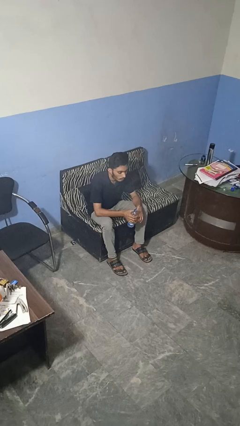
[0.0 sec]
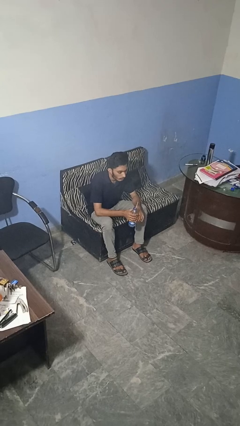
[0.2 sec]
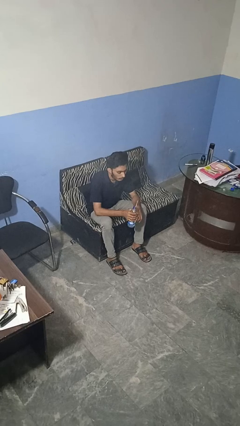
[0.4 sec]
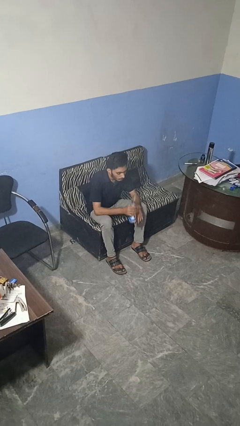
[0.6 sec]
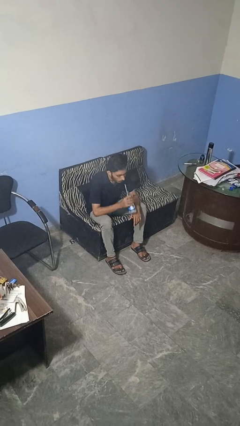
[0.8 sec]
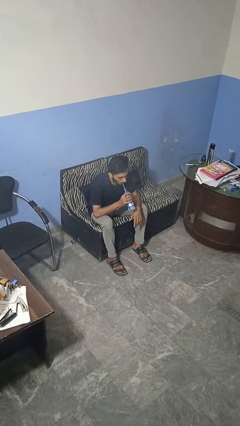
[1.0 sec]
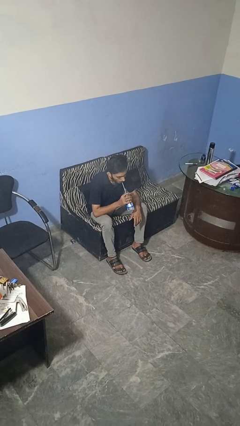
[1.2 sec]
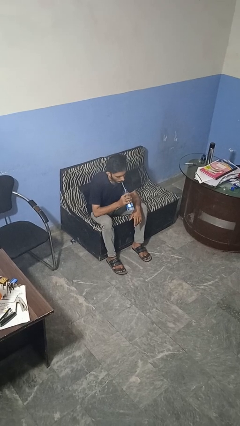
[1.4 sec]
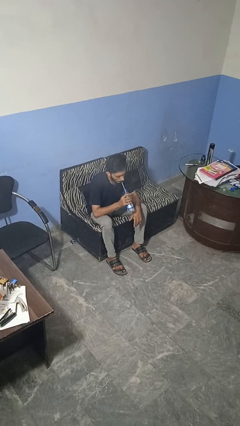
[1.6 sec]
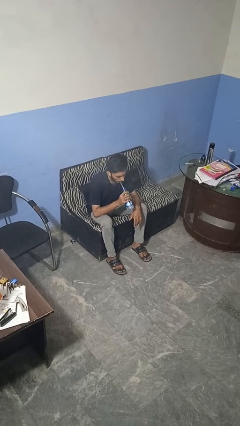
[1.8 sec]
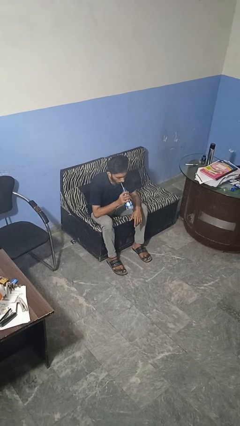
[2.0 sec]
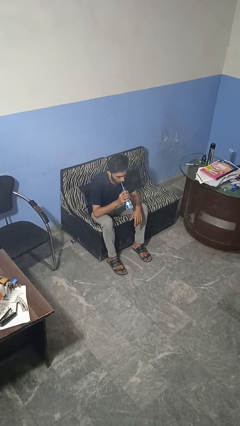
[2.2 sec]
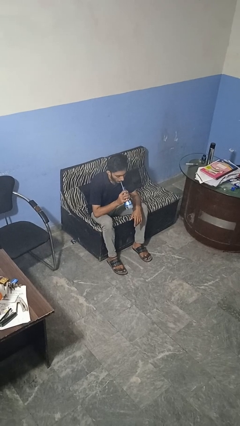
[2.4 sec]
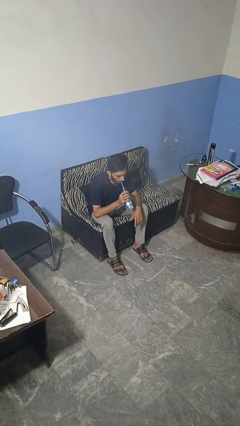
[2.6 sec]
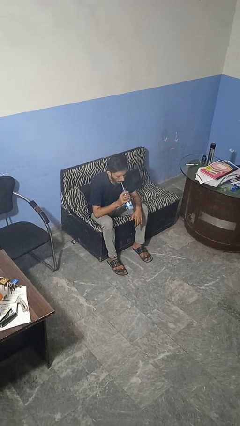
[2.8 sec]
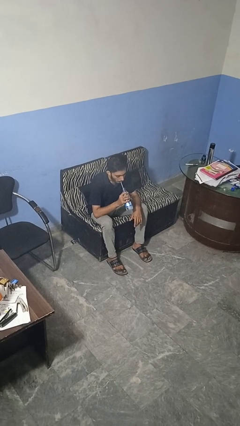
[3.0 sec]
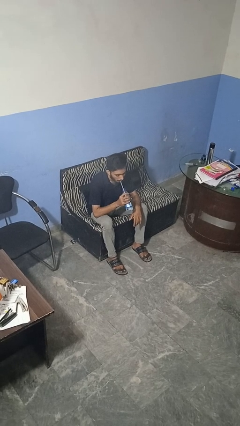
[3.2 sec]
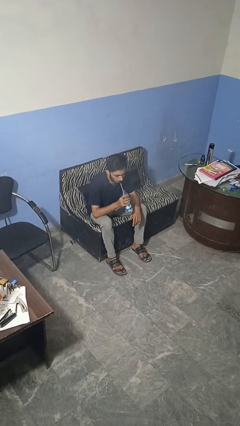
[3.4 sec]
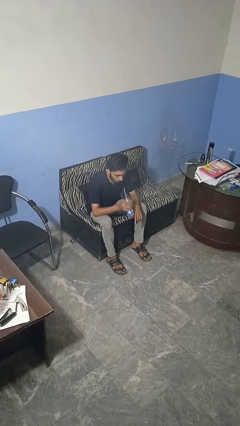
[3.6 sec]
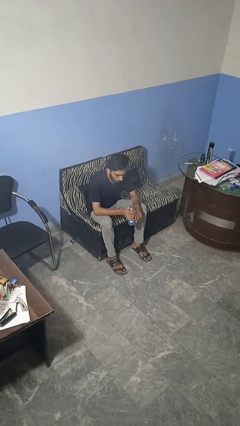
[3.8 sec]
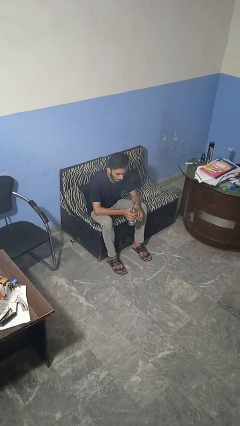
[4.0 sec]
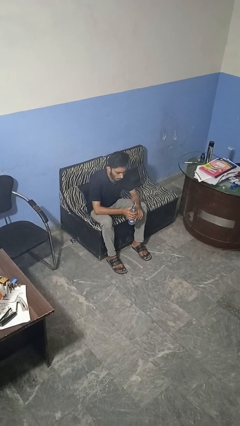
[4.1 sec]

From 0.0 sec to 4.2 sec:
person drinks from straw

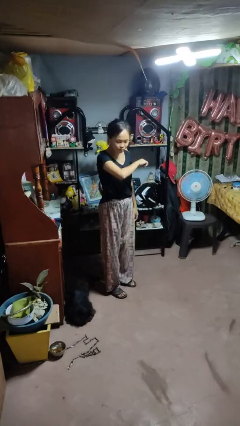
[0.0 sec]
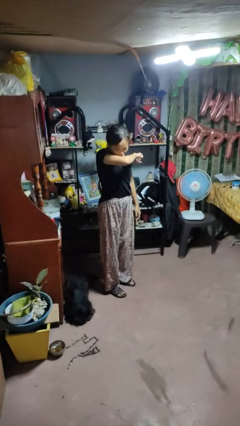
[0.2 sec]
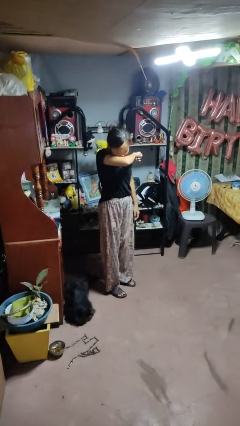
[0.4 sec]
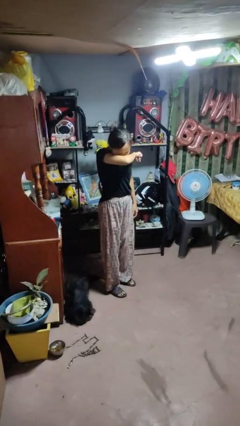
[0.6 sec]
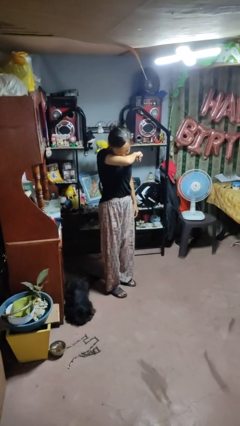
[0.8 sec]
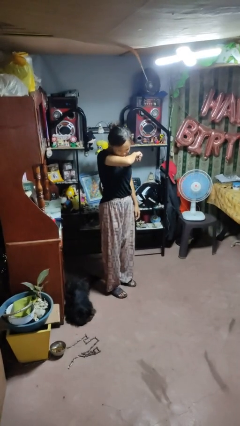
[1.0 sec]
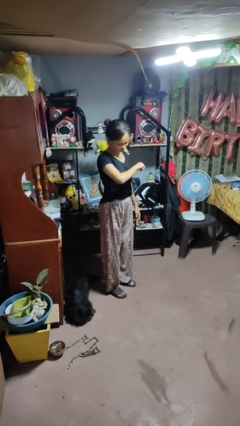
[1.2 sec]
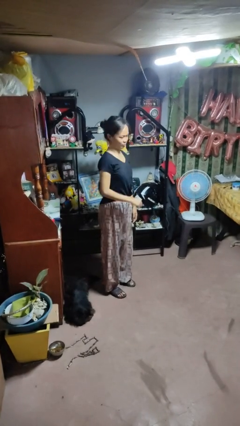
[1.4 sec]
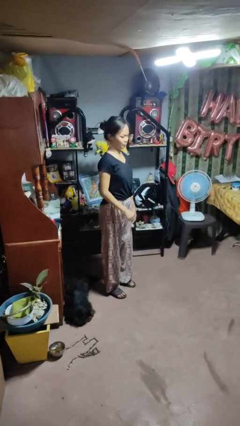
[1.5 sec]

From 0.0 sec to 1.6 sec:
person sneezes into arm

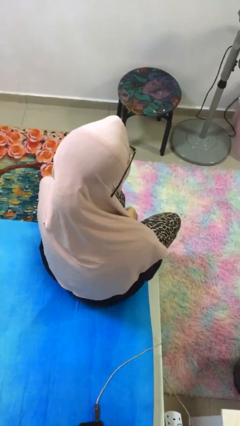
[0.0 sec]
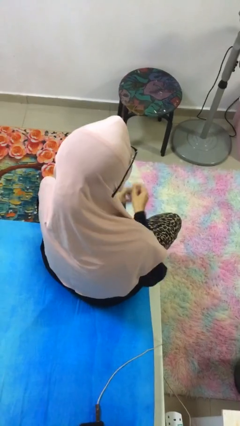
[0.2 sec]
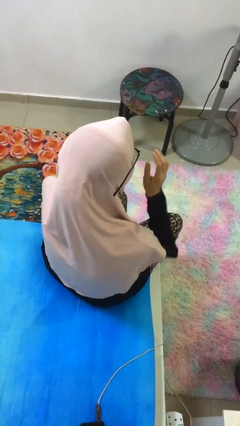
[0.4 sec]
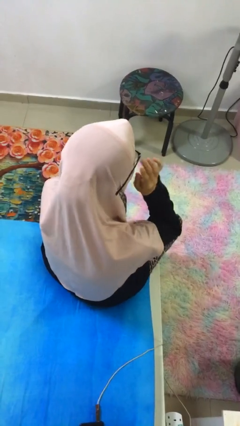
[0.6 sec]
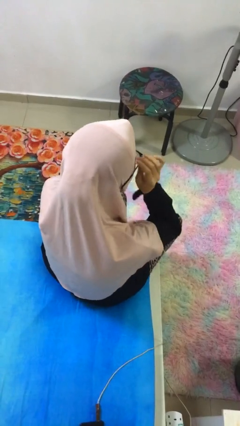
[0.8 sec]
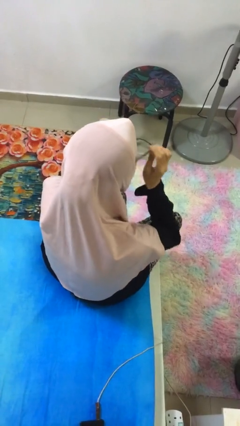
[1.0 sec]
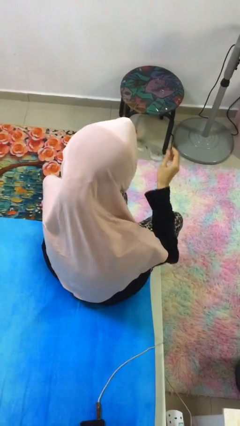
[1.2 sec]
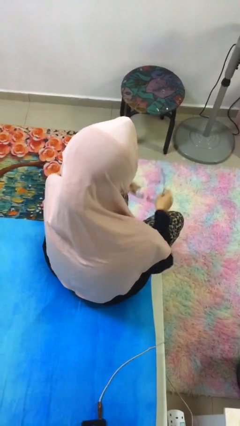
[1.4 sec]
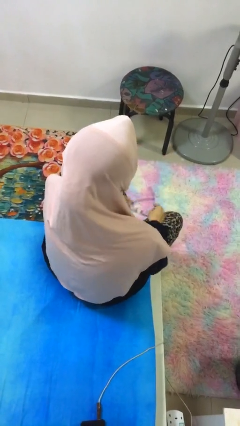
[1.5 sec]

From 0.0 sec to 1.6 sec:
person takes off glasses

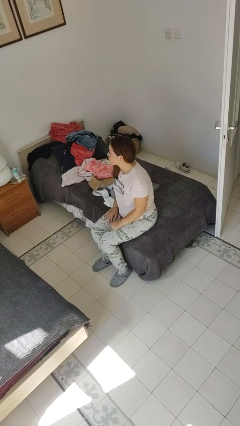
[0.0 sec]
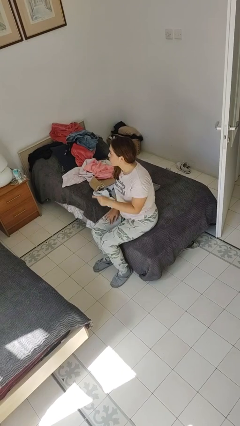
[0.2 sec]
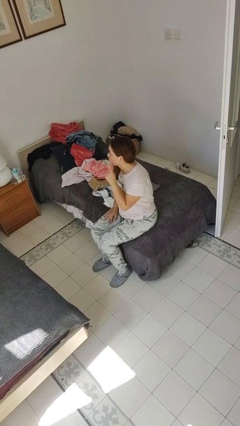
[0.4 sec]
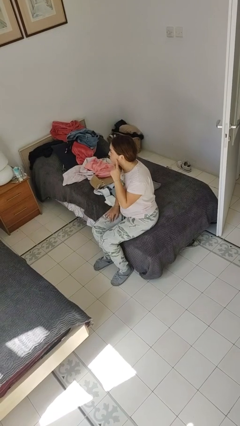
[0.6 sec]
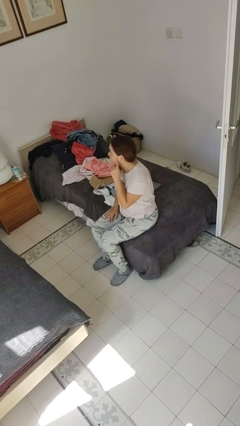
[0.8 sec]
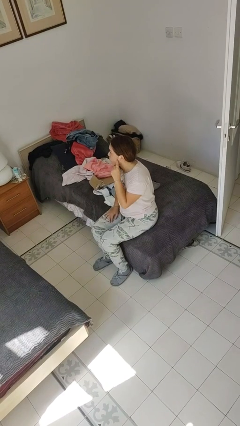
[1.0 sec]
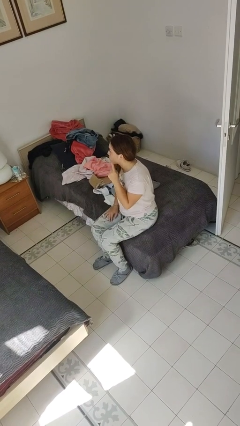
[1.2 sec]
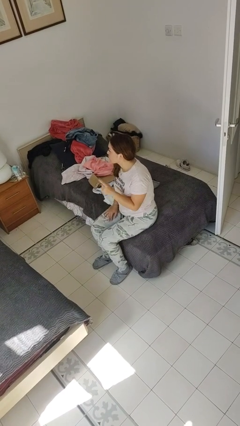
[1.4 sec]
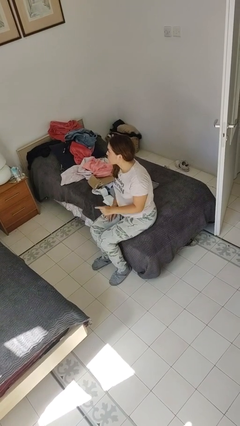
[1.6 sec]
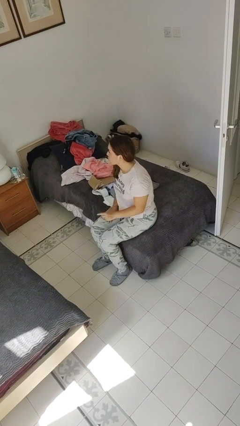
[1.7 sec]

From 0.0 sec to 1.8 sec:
person gestures listen closely

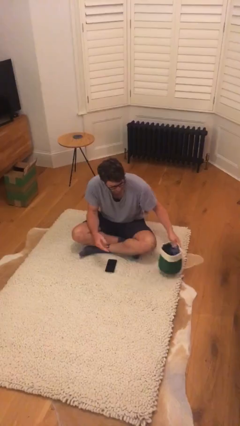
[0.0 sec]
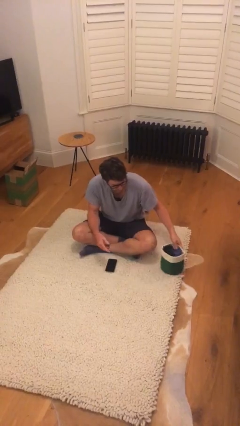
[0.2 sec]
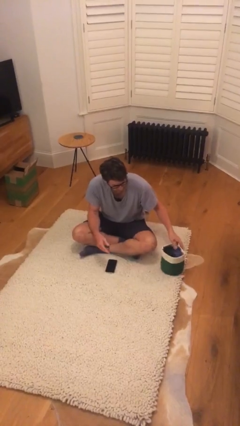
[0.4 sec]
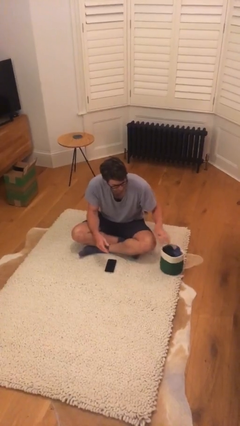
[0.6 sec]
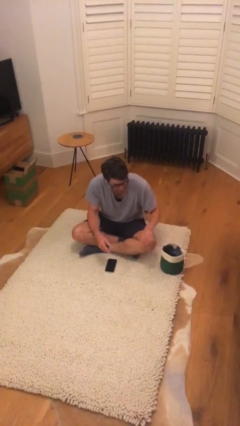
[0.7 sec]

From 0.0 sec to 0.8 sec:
person puts down object on floor

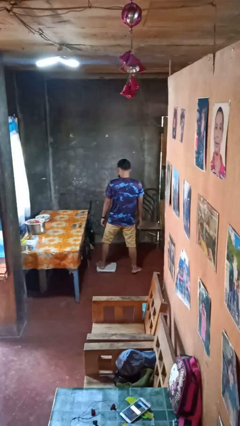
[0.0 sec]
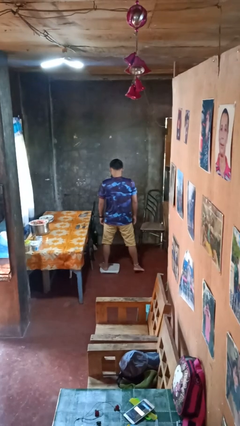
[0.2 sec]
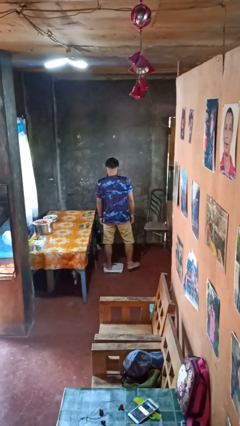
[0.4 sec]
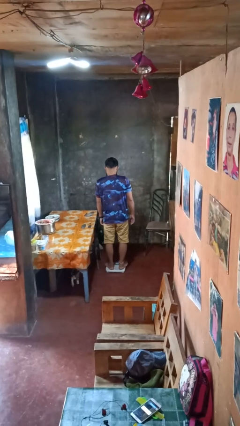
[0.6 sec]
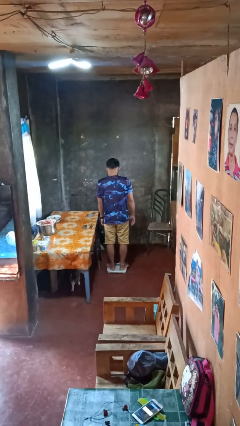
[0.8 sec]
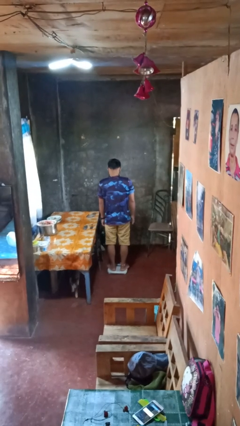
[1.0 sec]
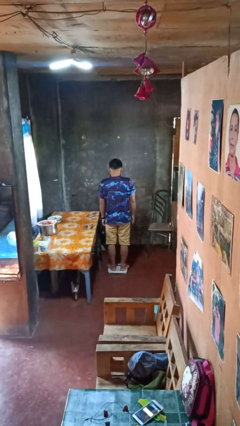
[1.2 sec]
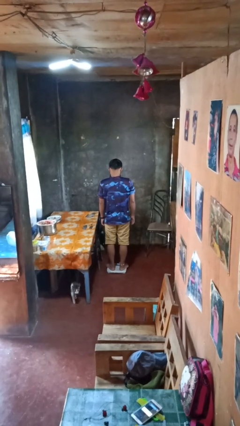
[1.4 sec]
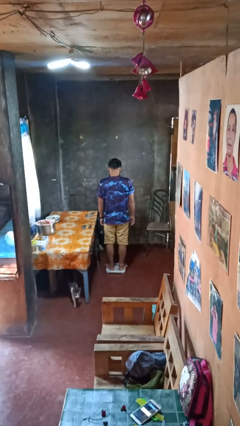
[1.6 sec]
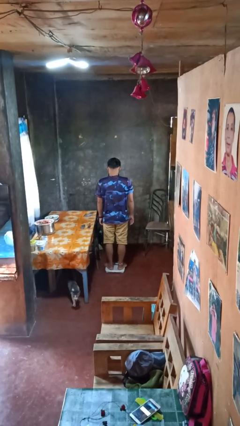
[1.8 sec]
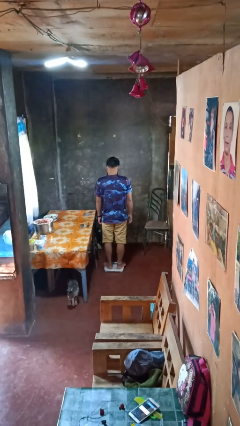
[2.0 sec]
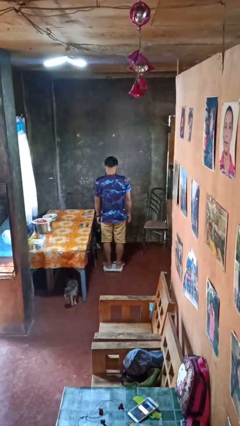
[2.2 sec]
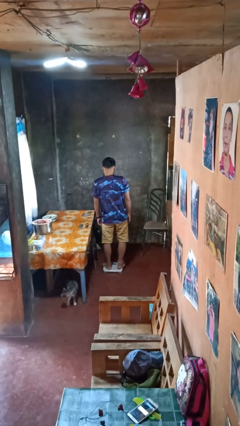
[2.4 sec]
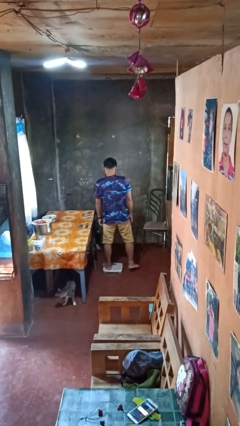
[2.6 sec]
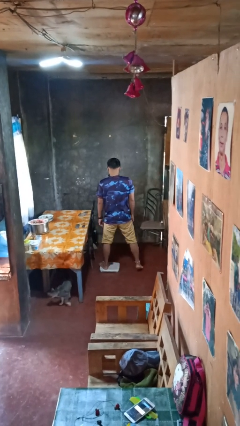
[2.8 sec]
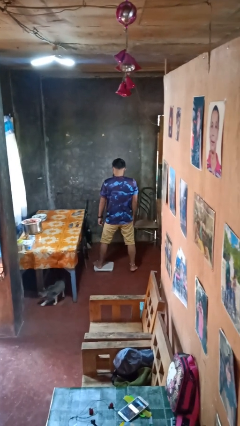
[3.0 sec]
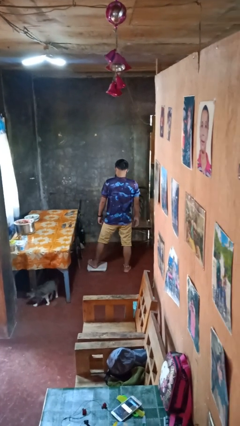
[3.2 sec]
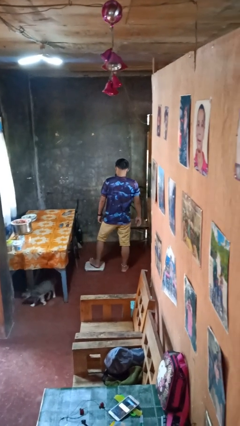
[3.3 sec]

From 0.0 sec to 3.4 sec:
person uses bodyweight scale

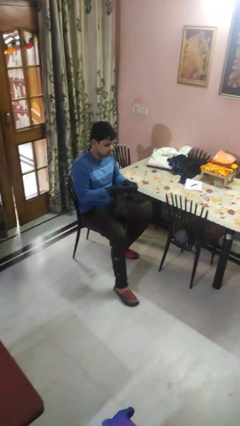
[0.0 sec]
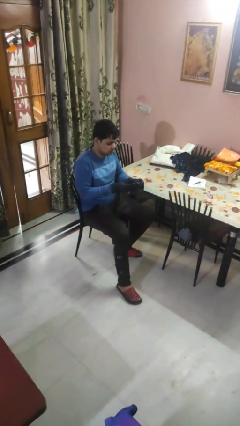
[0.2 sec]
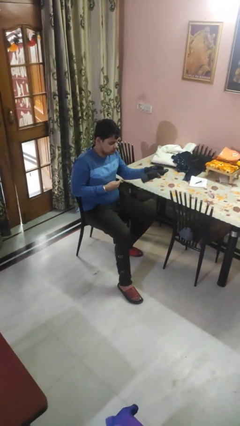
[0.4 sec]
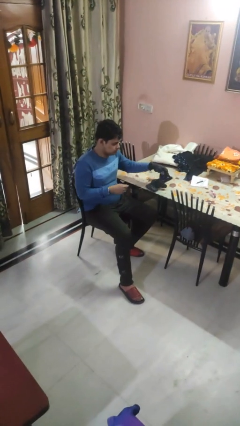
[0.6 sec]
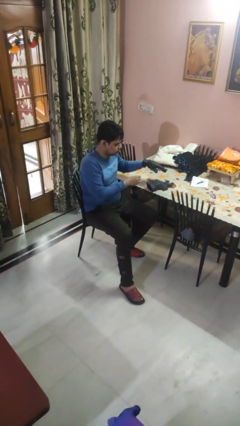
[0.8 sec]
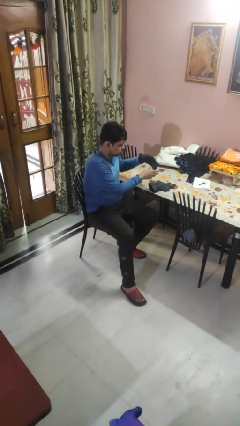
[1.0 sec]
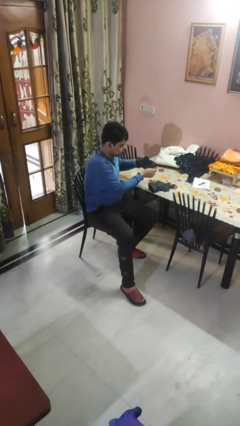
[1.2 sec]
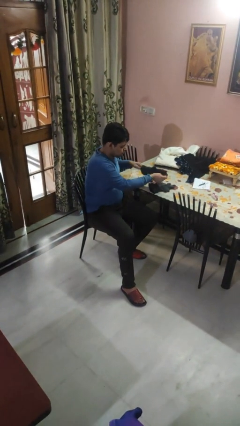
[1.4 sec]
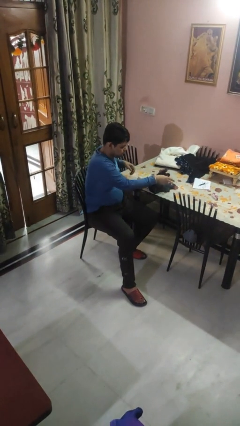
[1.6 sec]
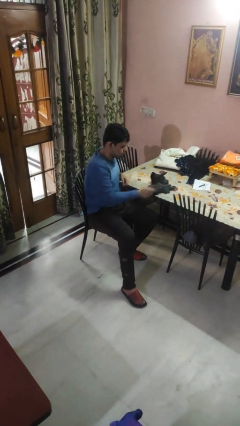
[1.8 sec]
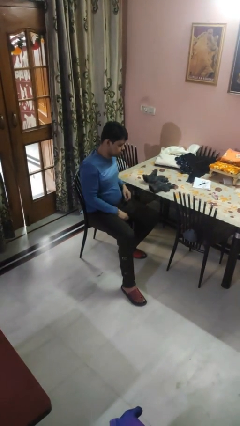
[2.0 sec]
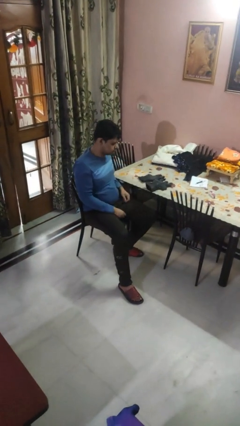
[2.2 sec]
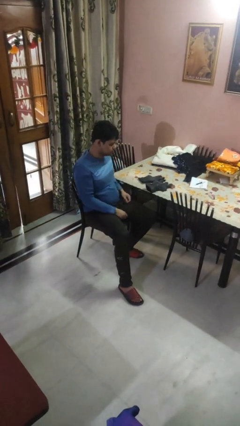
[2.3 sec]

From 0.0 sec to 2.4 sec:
person takes off gloves

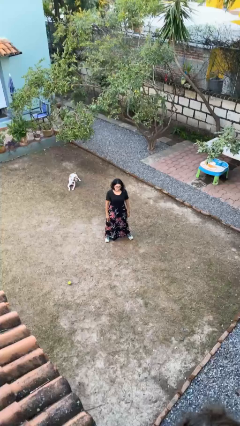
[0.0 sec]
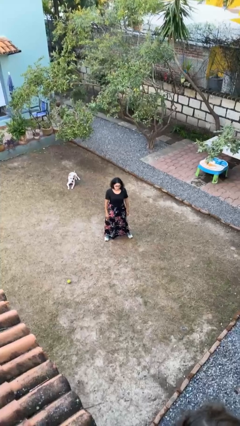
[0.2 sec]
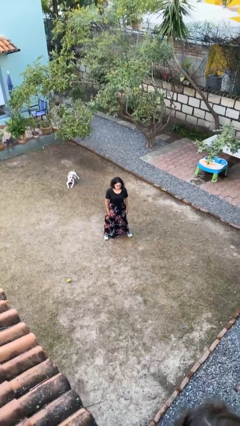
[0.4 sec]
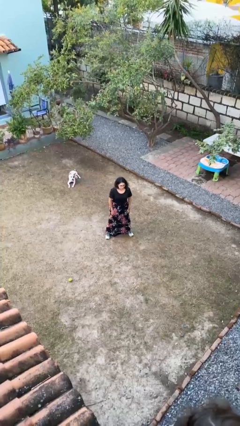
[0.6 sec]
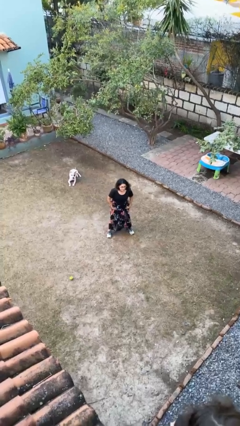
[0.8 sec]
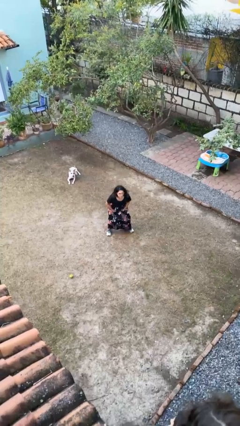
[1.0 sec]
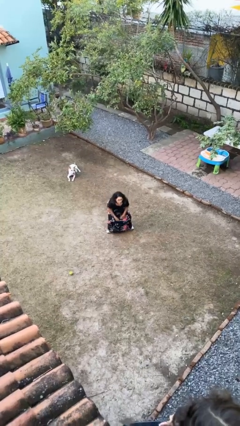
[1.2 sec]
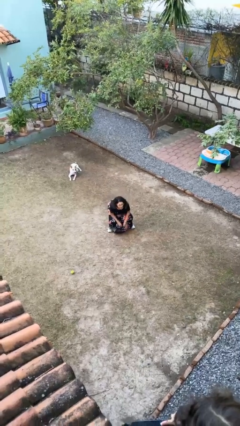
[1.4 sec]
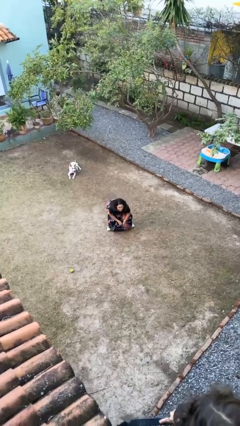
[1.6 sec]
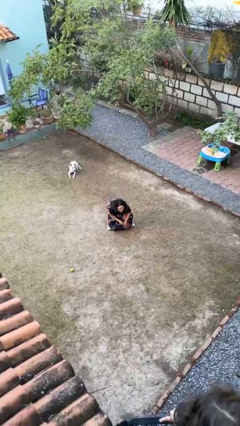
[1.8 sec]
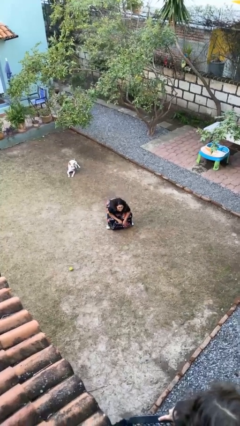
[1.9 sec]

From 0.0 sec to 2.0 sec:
person squats
